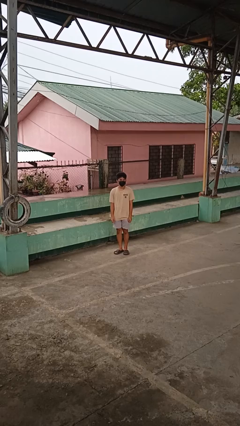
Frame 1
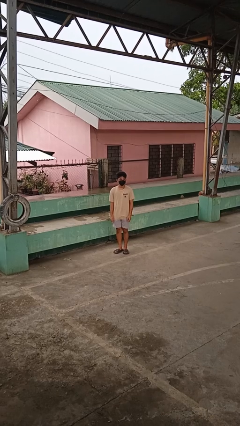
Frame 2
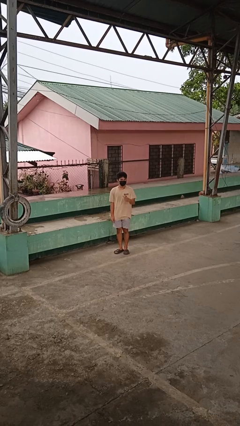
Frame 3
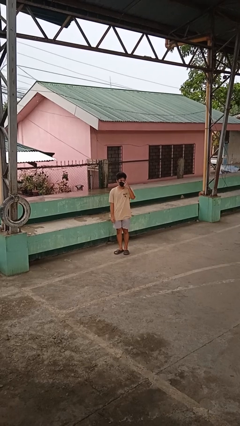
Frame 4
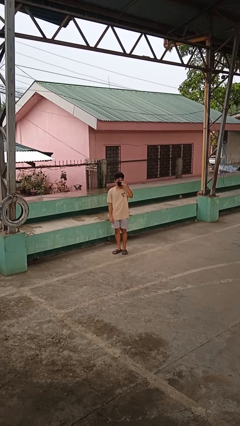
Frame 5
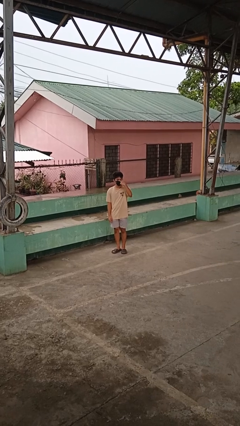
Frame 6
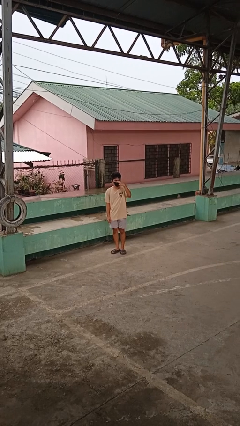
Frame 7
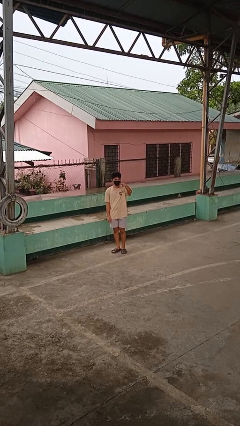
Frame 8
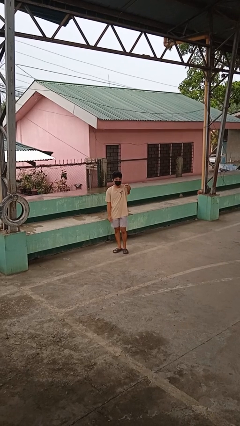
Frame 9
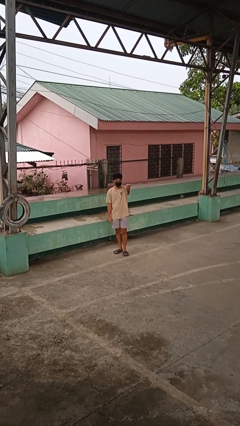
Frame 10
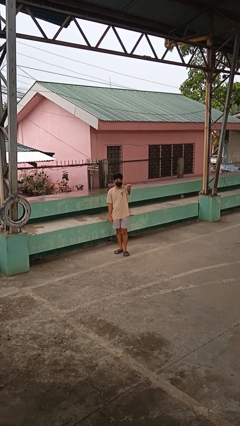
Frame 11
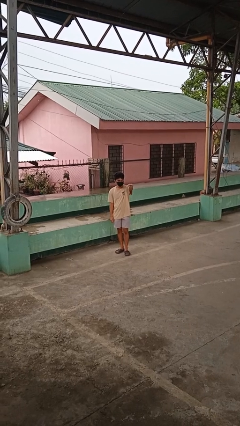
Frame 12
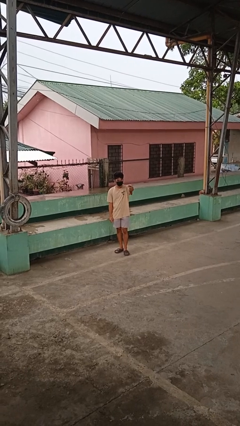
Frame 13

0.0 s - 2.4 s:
person gestures watch closely

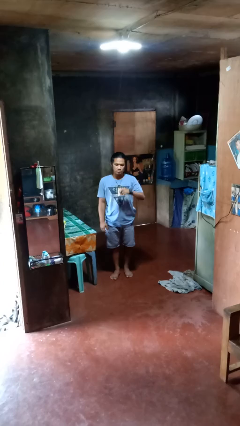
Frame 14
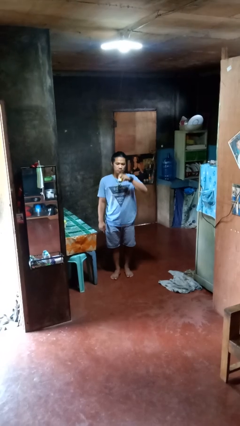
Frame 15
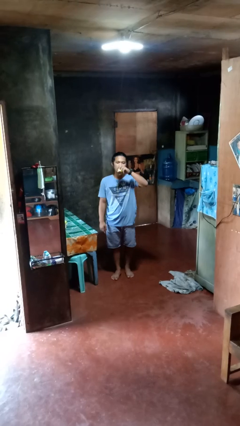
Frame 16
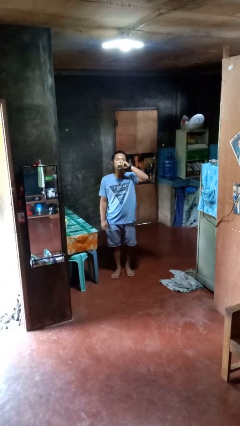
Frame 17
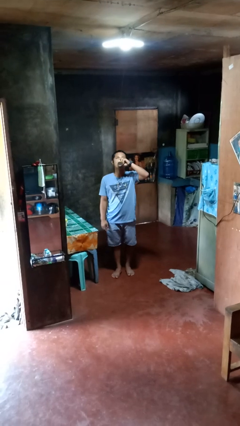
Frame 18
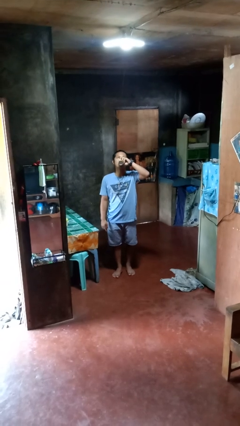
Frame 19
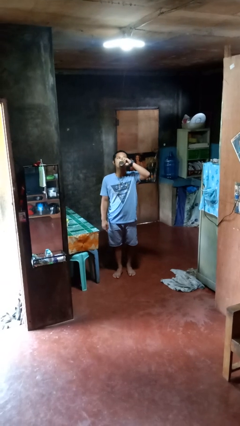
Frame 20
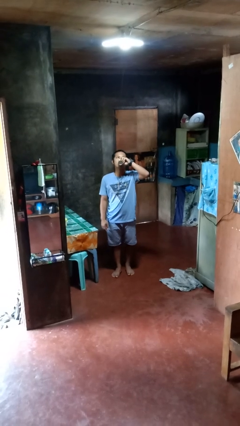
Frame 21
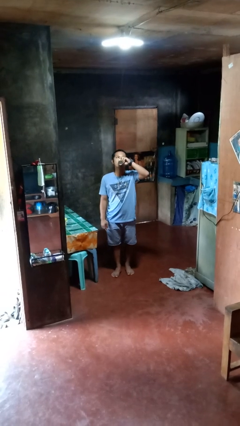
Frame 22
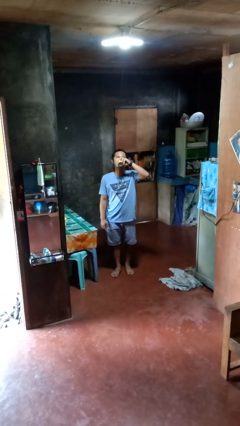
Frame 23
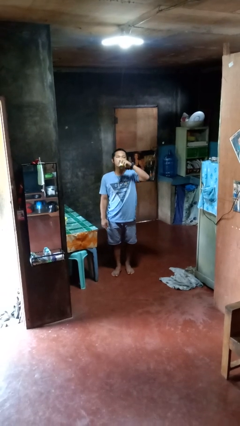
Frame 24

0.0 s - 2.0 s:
person drinks from beverage can

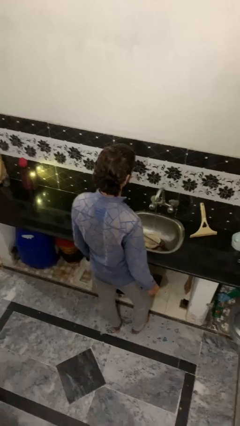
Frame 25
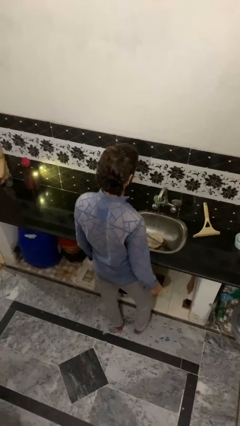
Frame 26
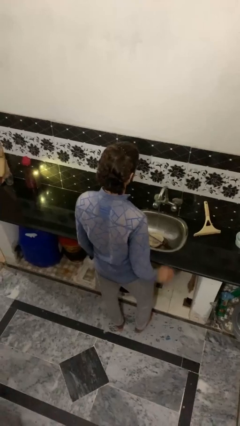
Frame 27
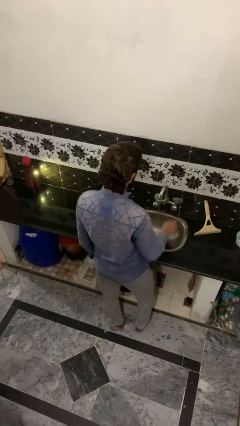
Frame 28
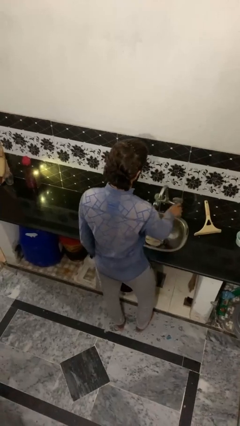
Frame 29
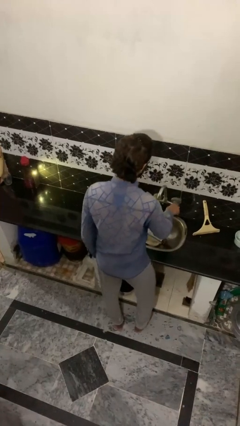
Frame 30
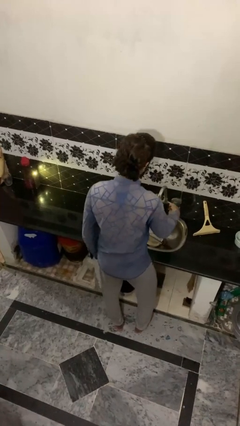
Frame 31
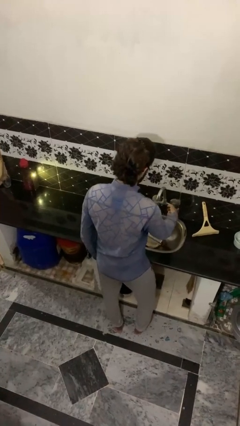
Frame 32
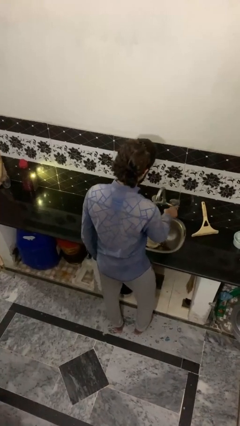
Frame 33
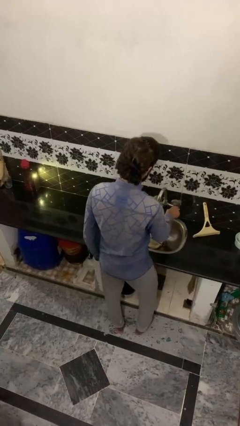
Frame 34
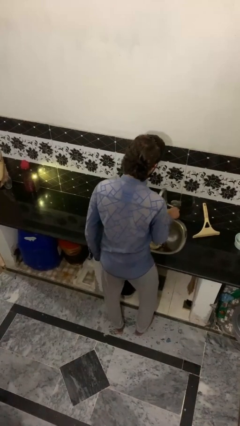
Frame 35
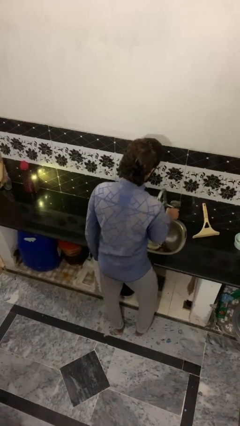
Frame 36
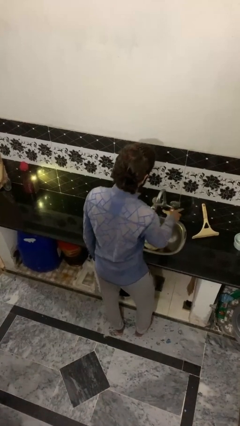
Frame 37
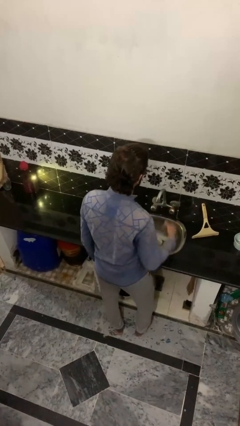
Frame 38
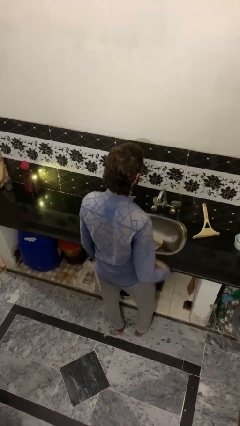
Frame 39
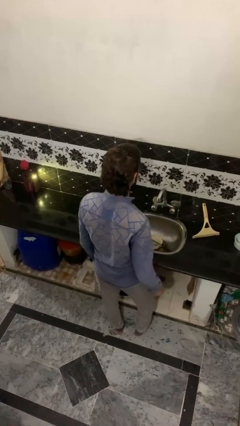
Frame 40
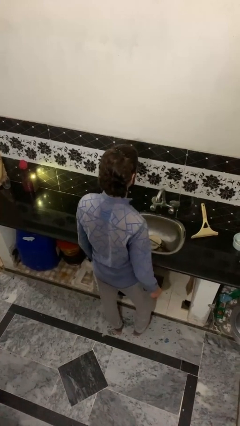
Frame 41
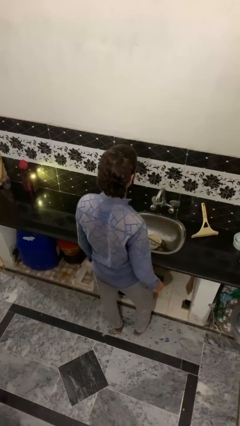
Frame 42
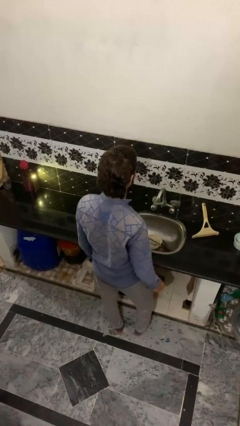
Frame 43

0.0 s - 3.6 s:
person turns off faucet

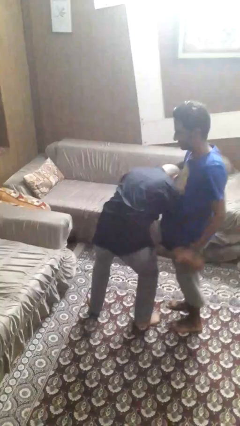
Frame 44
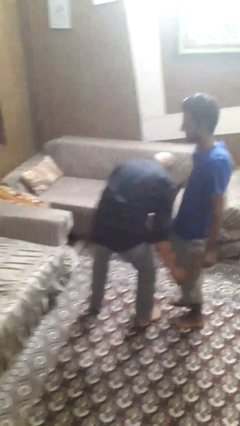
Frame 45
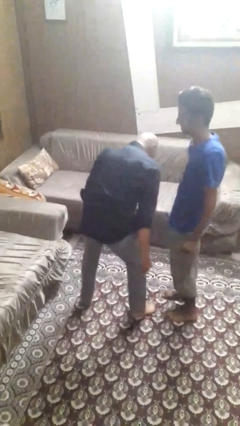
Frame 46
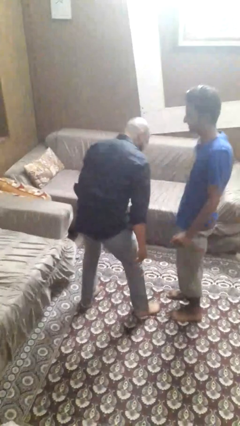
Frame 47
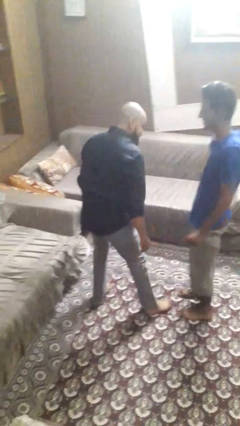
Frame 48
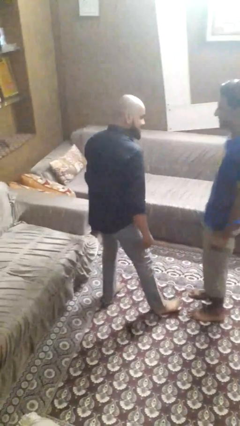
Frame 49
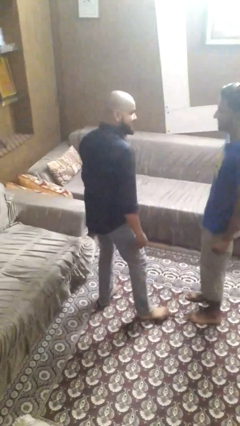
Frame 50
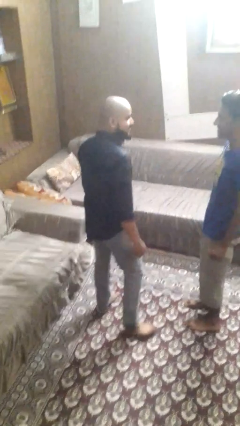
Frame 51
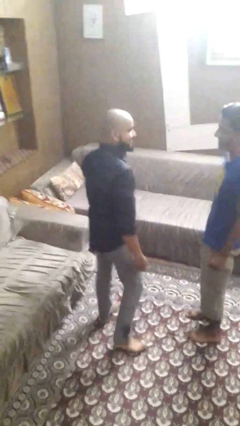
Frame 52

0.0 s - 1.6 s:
person puts down person

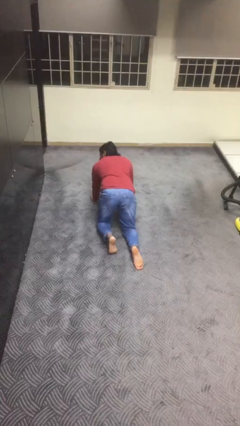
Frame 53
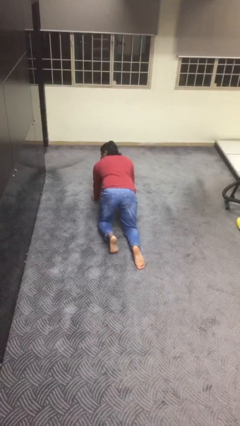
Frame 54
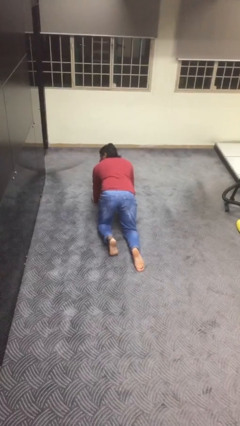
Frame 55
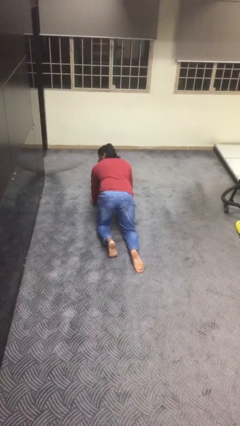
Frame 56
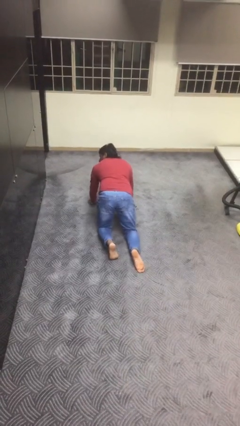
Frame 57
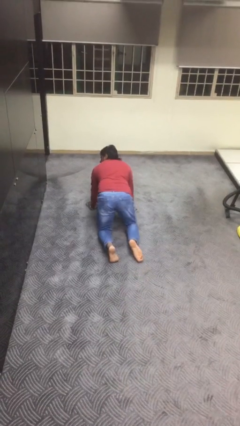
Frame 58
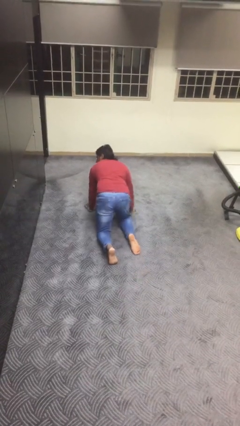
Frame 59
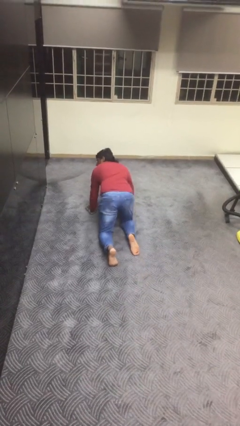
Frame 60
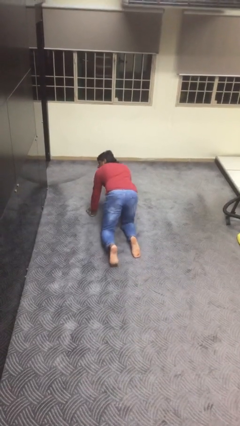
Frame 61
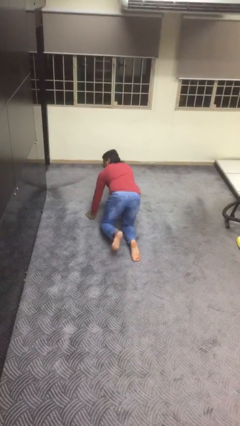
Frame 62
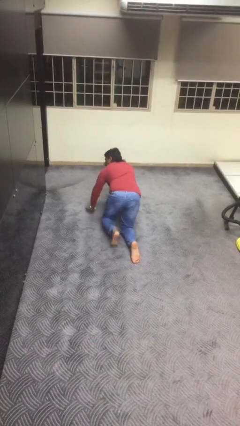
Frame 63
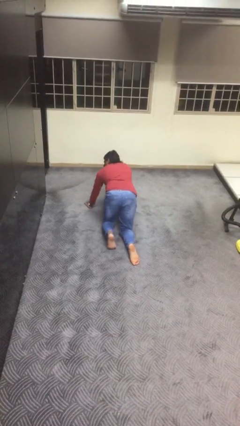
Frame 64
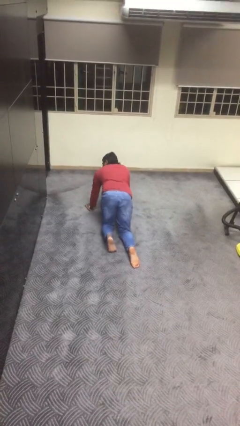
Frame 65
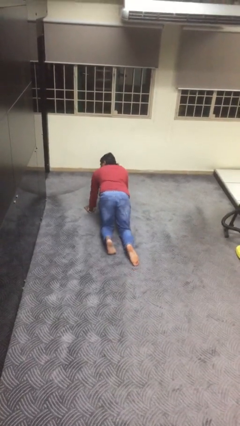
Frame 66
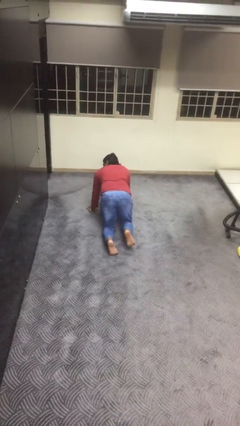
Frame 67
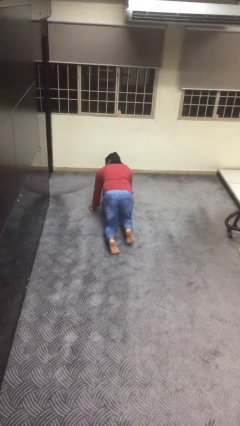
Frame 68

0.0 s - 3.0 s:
person crawls

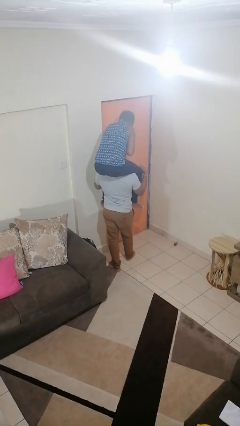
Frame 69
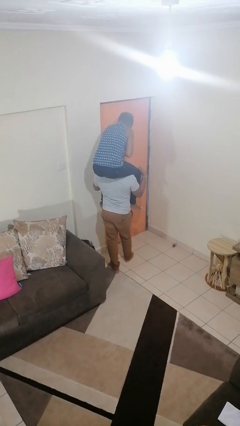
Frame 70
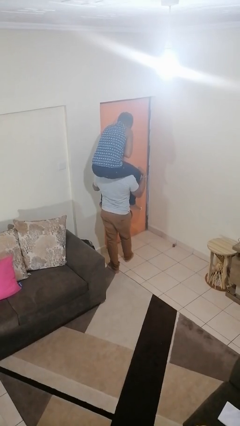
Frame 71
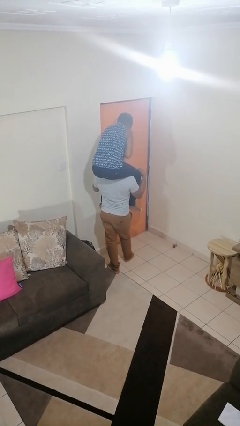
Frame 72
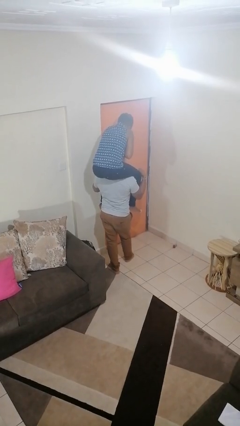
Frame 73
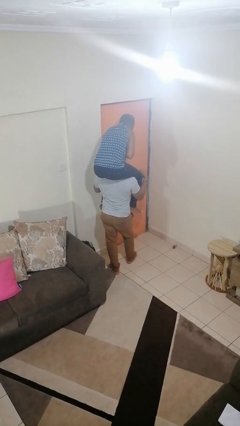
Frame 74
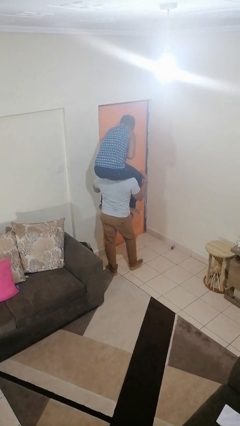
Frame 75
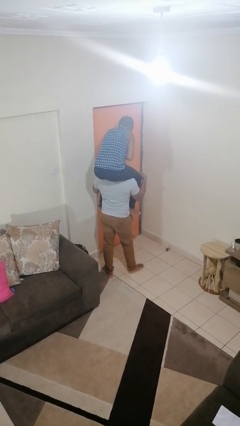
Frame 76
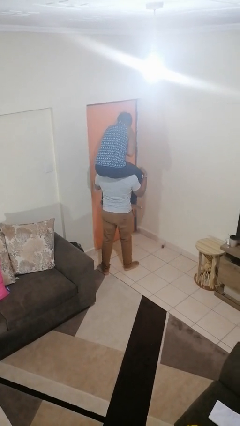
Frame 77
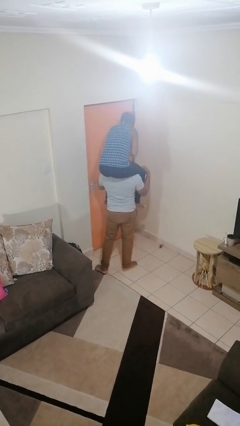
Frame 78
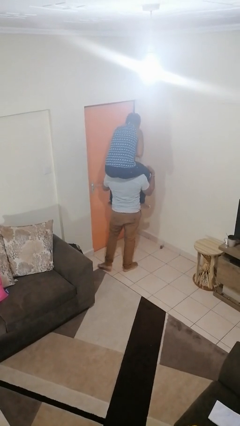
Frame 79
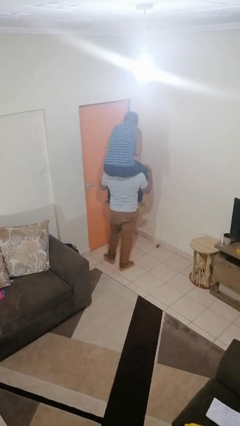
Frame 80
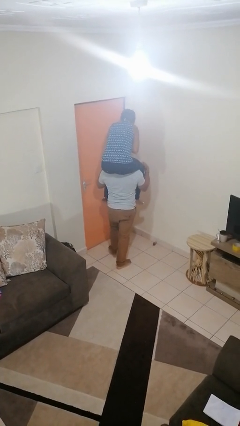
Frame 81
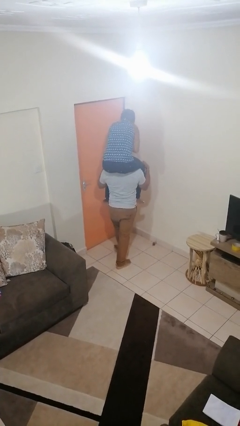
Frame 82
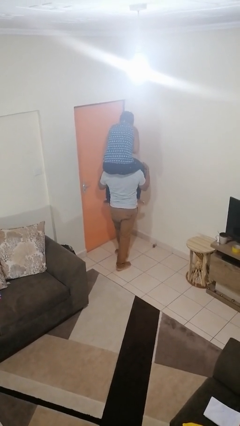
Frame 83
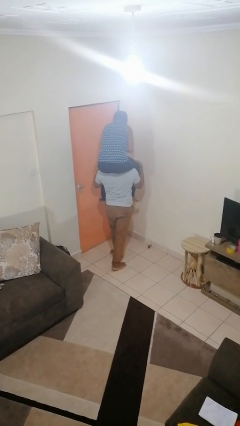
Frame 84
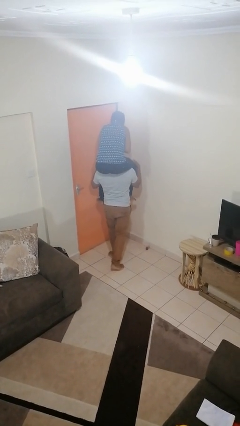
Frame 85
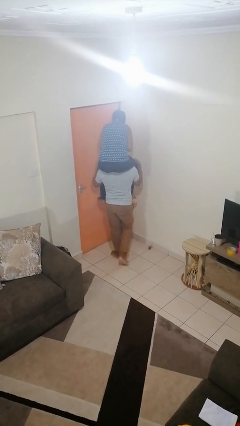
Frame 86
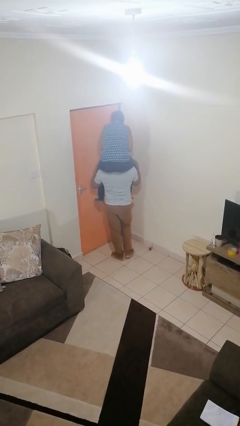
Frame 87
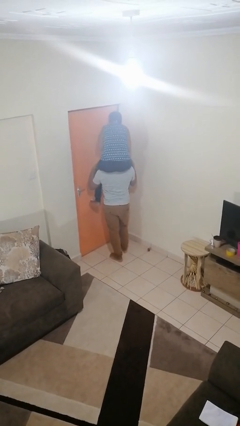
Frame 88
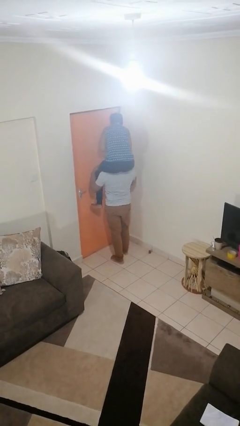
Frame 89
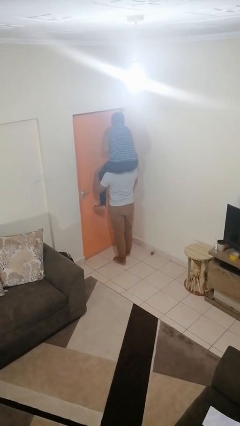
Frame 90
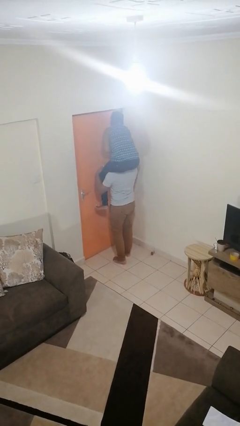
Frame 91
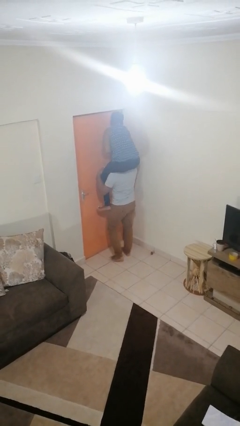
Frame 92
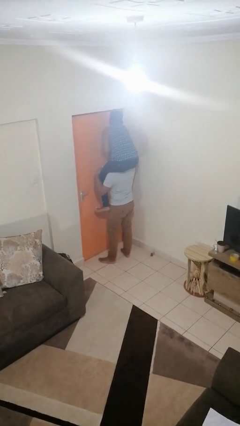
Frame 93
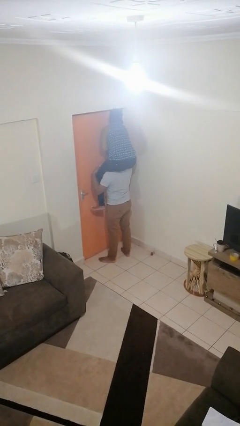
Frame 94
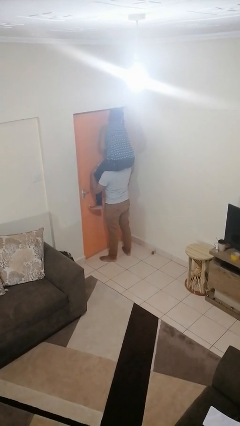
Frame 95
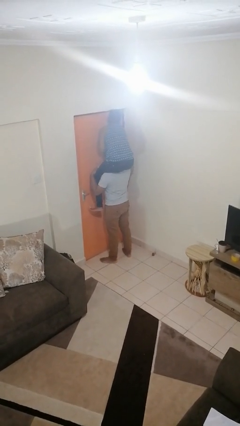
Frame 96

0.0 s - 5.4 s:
person carries person on shoulders
